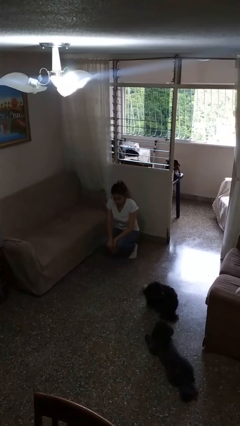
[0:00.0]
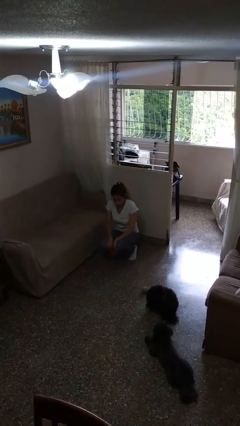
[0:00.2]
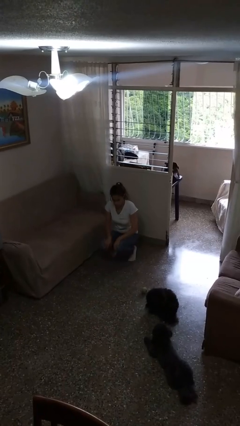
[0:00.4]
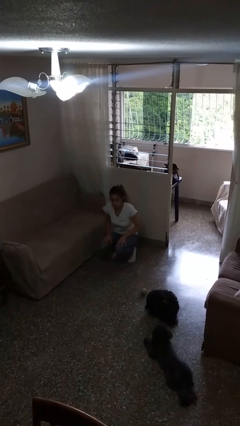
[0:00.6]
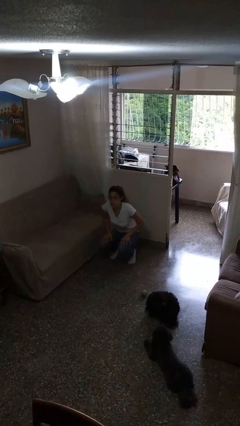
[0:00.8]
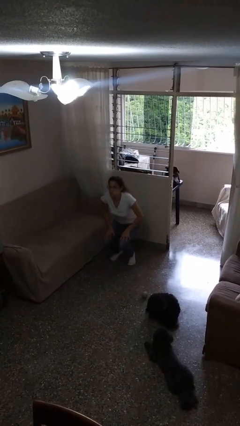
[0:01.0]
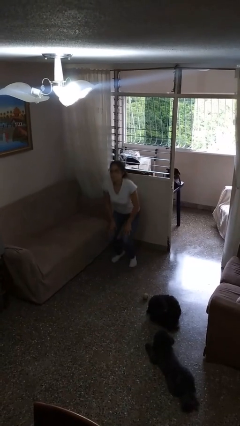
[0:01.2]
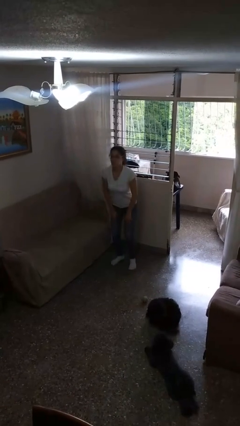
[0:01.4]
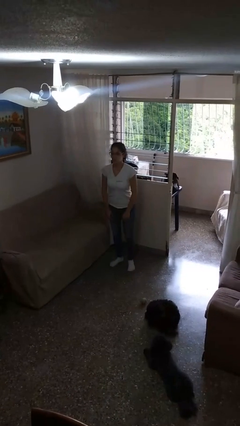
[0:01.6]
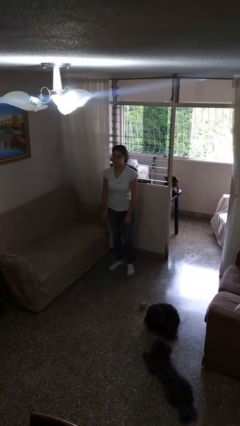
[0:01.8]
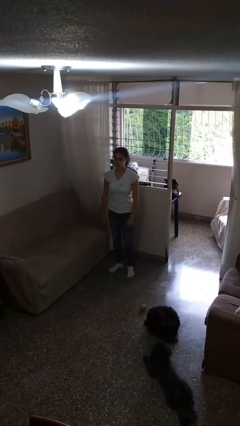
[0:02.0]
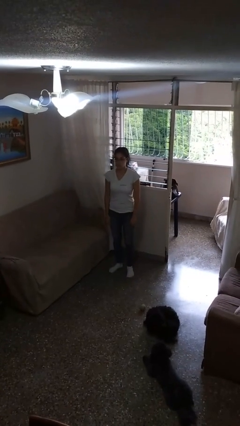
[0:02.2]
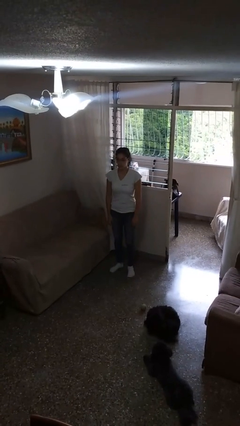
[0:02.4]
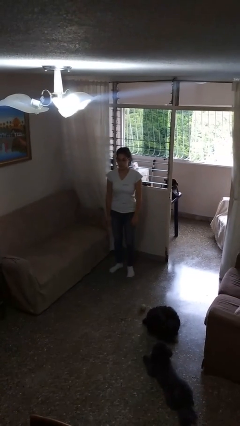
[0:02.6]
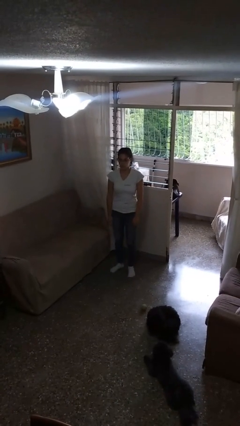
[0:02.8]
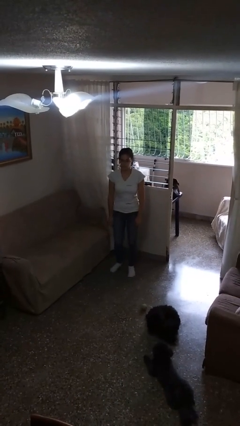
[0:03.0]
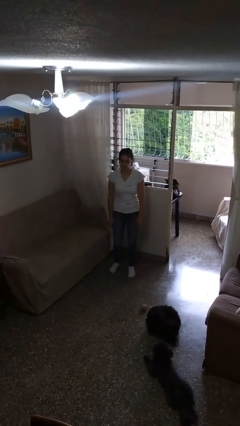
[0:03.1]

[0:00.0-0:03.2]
person stands up

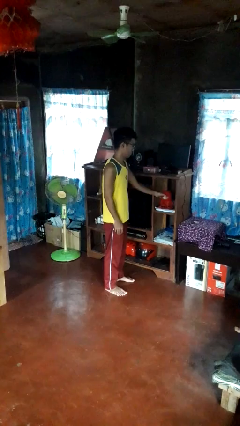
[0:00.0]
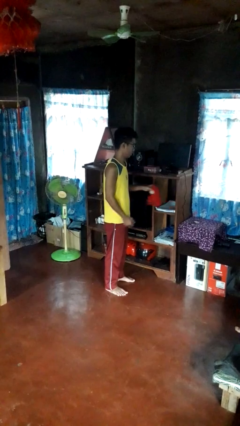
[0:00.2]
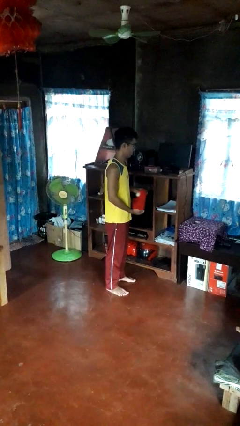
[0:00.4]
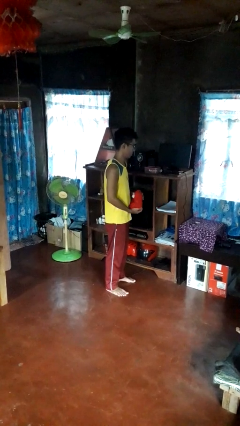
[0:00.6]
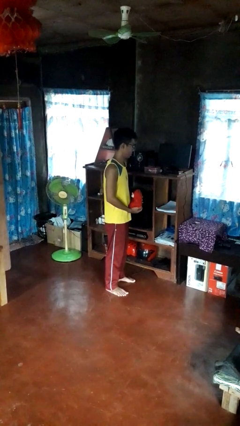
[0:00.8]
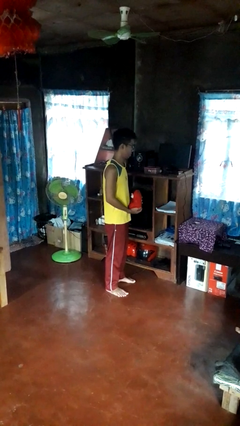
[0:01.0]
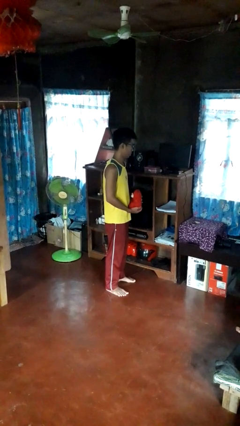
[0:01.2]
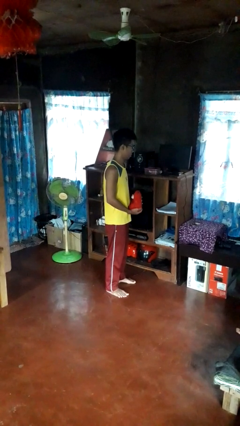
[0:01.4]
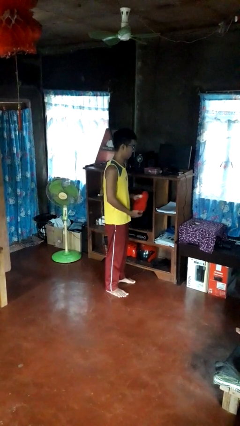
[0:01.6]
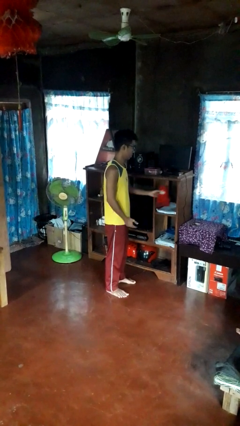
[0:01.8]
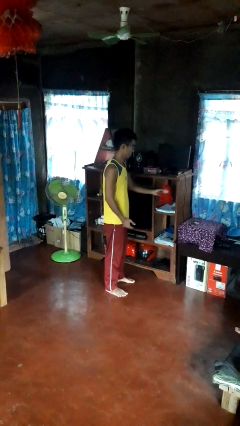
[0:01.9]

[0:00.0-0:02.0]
person picks up object from shelf

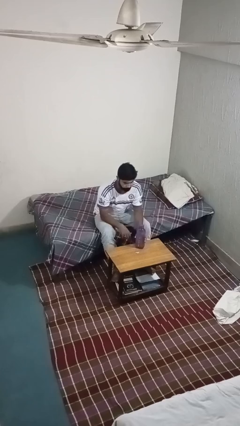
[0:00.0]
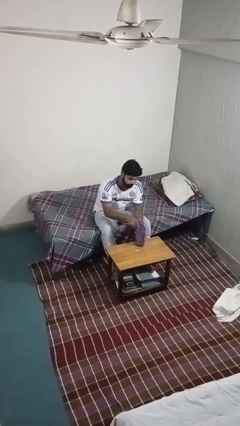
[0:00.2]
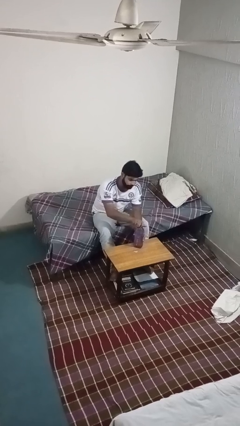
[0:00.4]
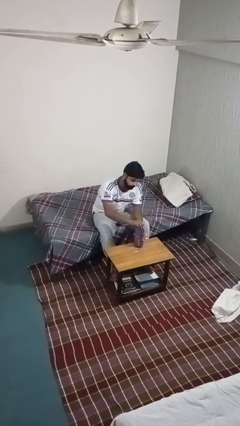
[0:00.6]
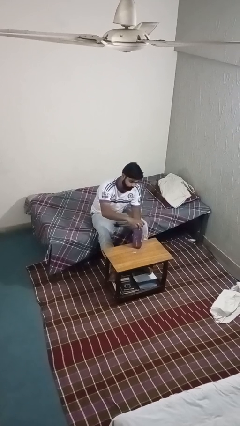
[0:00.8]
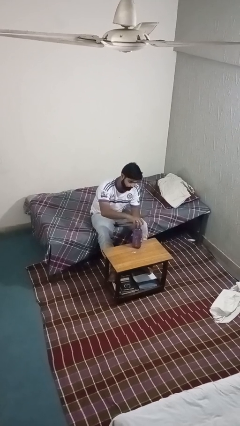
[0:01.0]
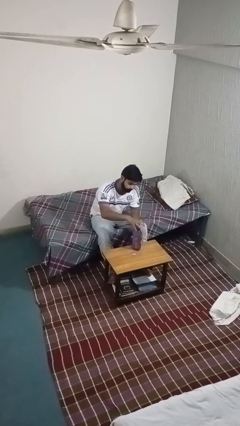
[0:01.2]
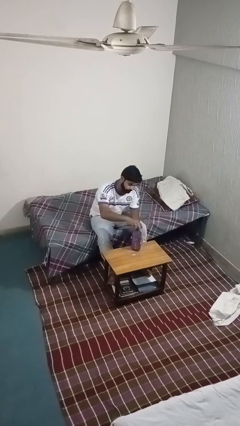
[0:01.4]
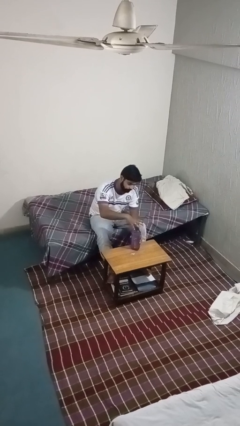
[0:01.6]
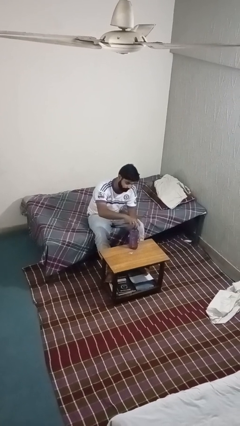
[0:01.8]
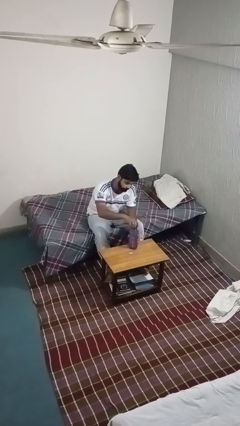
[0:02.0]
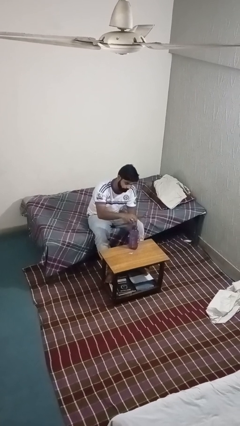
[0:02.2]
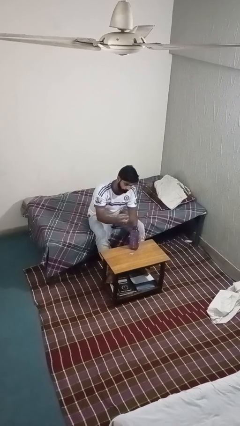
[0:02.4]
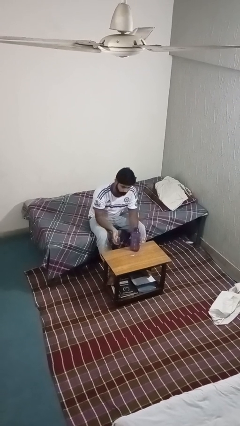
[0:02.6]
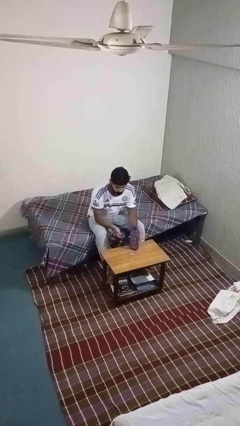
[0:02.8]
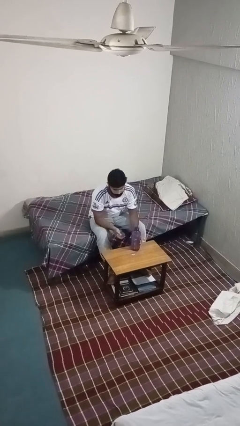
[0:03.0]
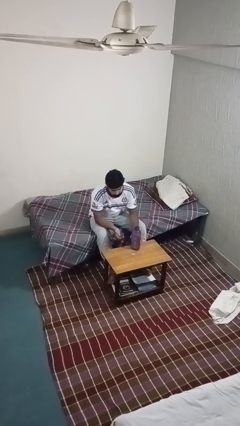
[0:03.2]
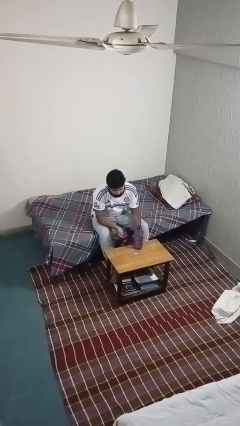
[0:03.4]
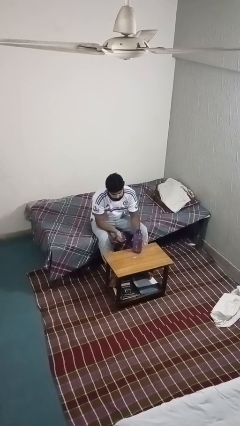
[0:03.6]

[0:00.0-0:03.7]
person unscrews lid from bottle

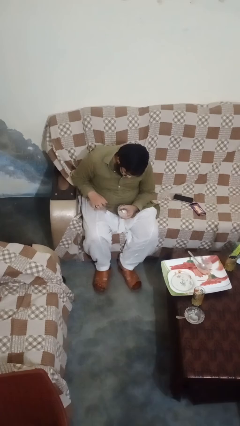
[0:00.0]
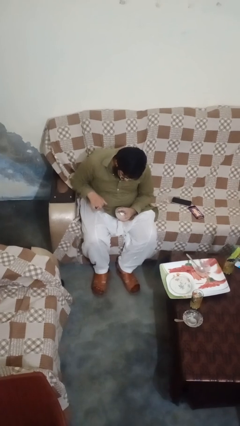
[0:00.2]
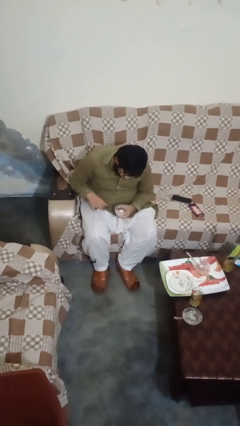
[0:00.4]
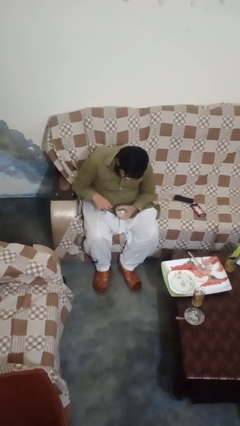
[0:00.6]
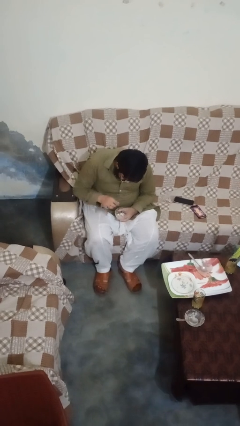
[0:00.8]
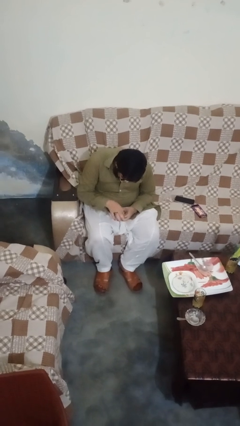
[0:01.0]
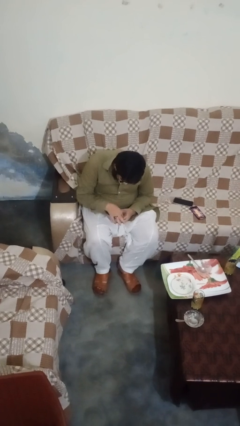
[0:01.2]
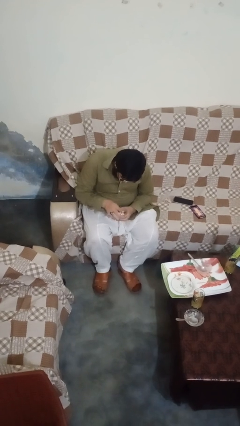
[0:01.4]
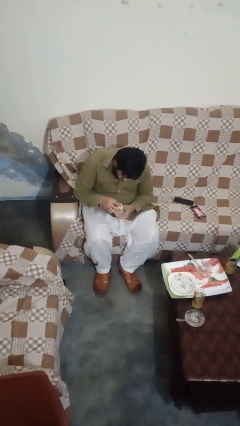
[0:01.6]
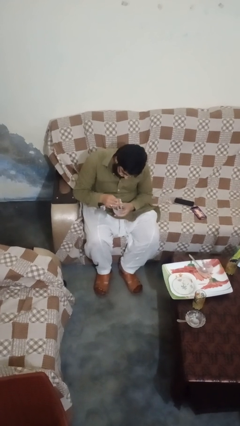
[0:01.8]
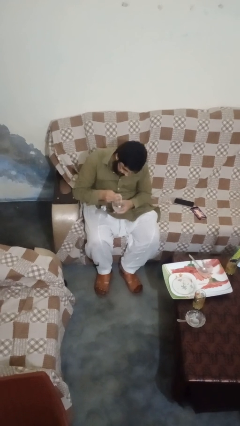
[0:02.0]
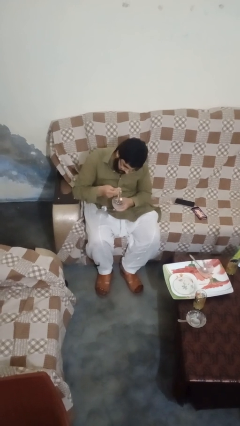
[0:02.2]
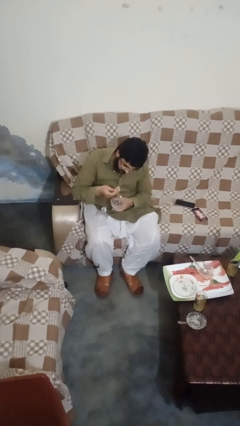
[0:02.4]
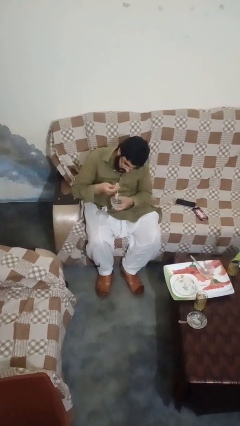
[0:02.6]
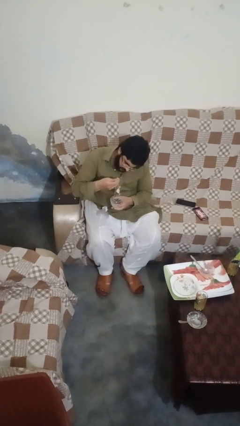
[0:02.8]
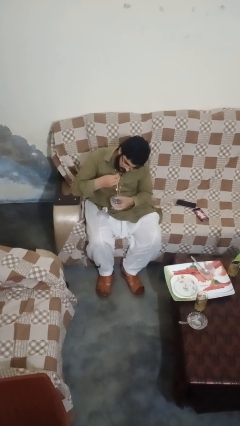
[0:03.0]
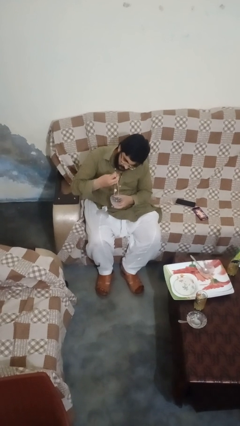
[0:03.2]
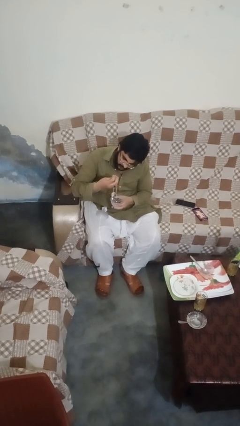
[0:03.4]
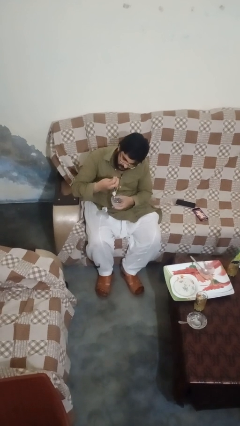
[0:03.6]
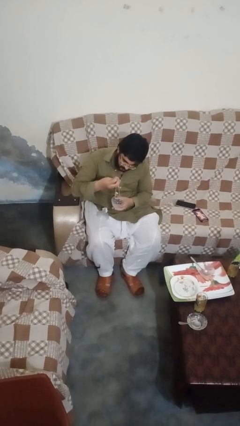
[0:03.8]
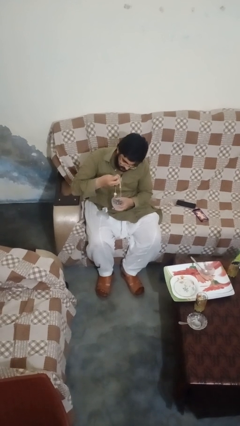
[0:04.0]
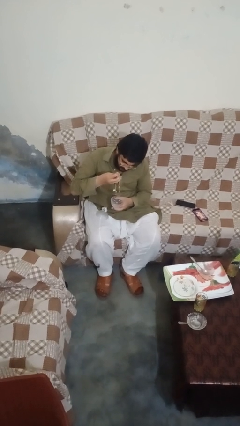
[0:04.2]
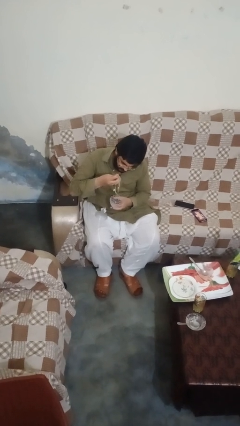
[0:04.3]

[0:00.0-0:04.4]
person searches jewelry box

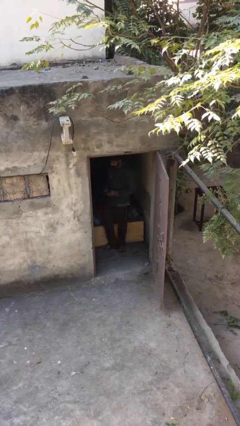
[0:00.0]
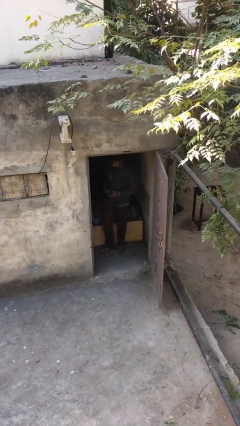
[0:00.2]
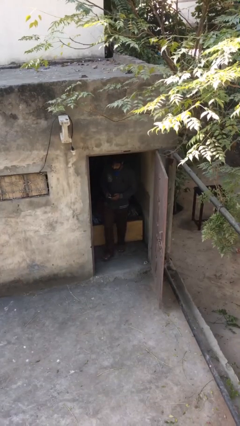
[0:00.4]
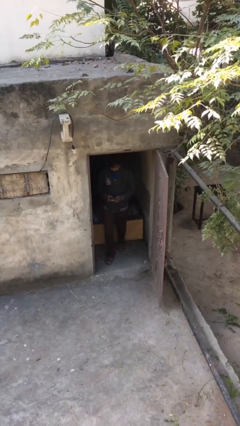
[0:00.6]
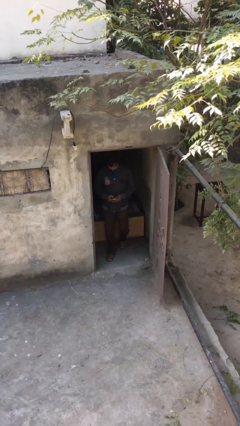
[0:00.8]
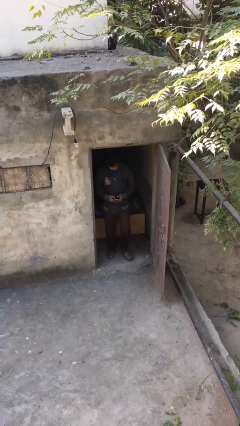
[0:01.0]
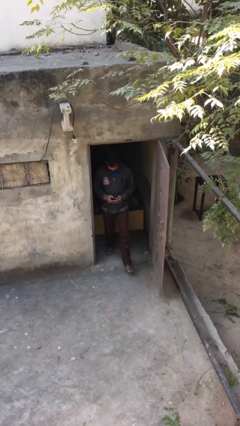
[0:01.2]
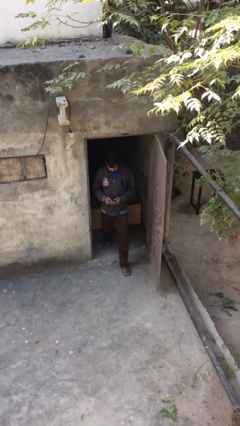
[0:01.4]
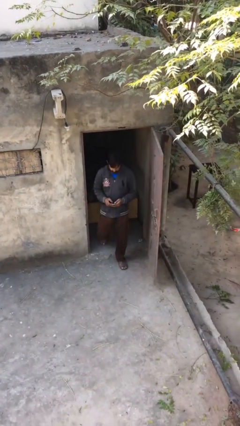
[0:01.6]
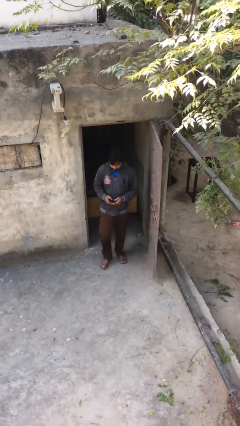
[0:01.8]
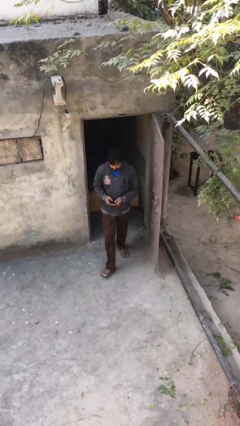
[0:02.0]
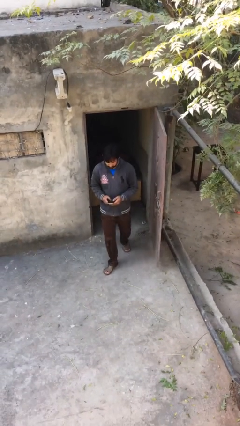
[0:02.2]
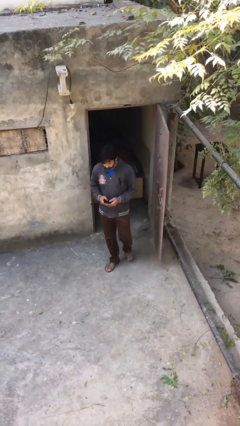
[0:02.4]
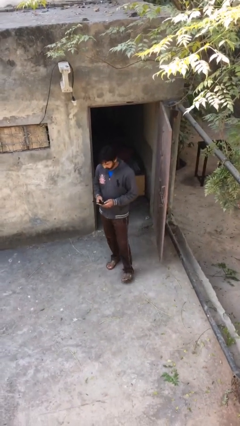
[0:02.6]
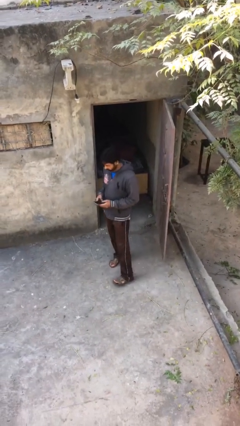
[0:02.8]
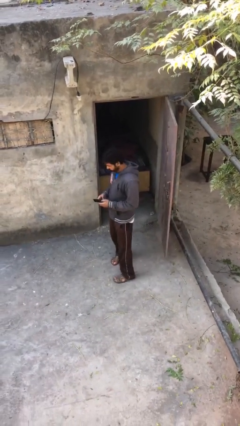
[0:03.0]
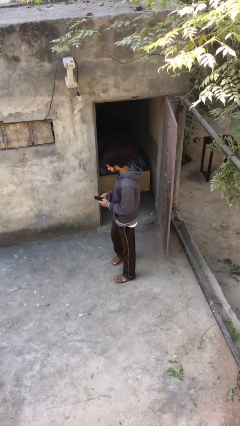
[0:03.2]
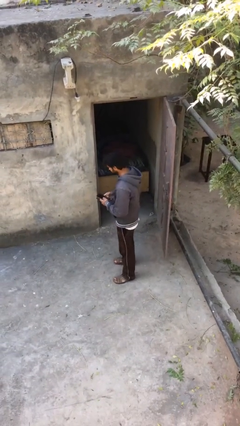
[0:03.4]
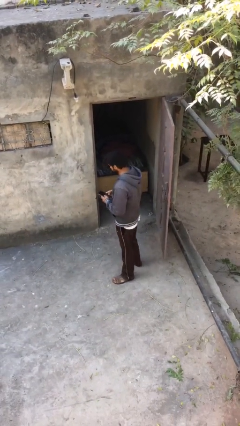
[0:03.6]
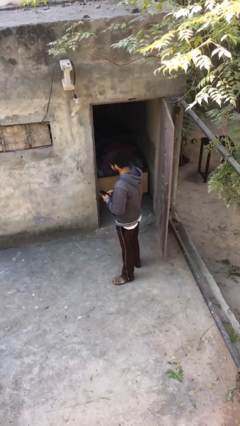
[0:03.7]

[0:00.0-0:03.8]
person enters scene through structure
